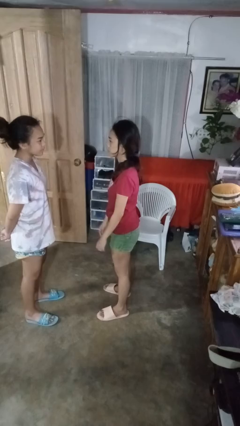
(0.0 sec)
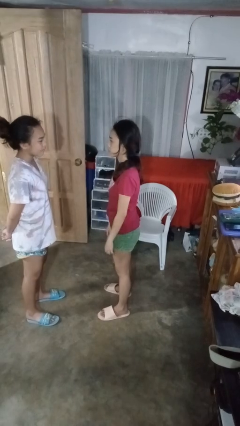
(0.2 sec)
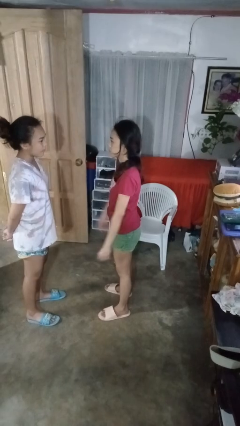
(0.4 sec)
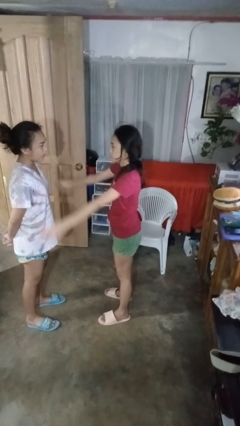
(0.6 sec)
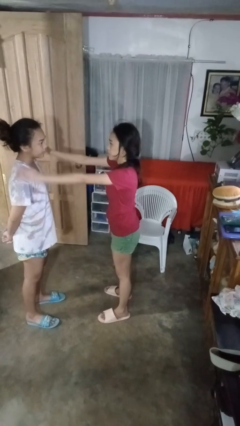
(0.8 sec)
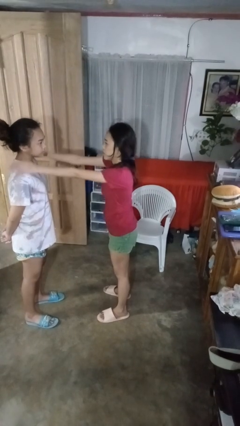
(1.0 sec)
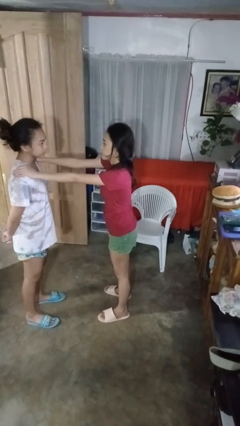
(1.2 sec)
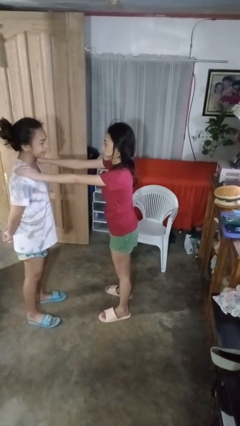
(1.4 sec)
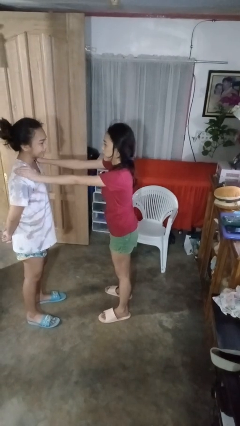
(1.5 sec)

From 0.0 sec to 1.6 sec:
person pounds shoulders of person

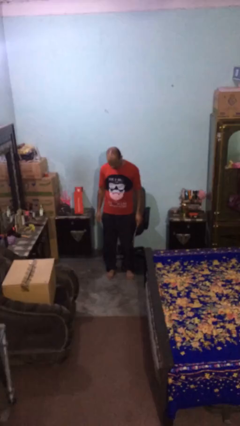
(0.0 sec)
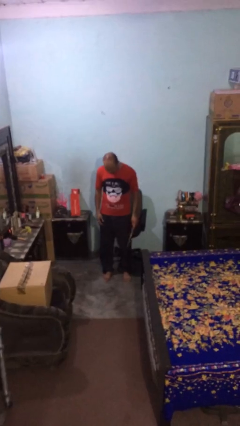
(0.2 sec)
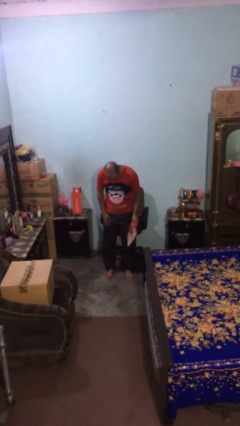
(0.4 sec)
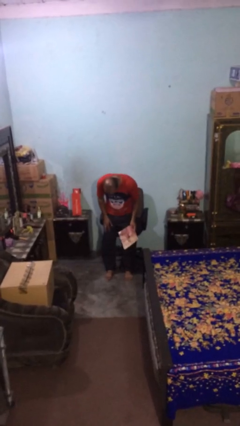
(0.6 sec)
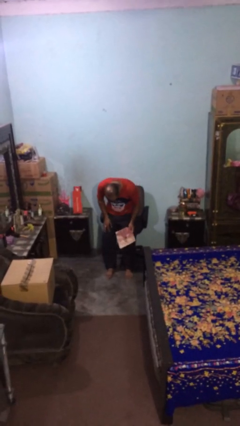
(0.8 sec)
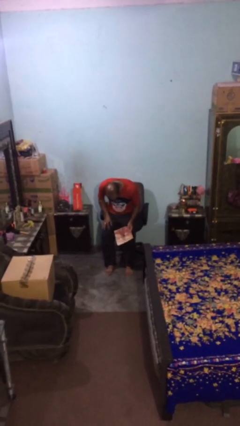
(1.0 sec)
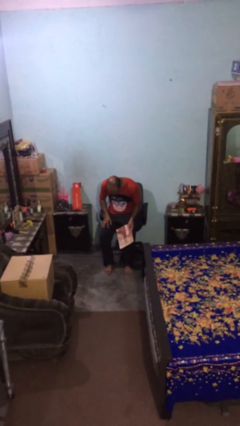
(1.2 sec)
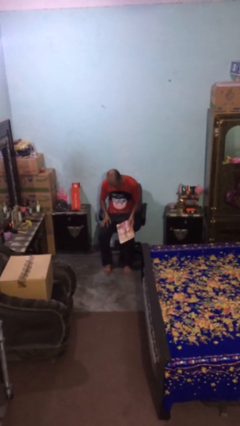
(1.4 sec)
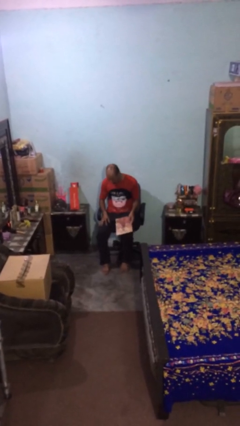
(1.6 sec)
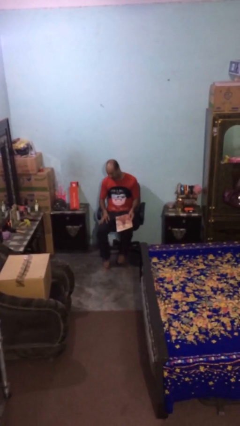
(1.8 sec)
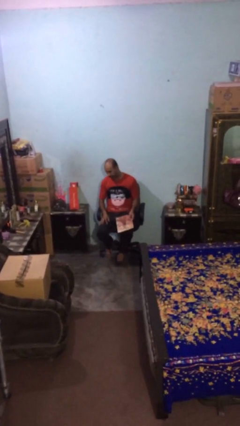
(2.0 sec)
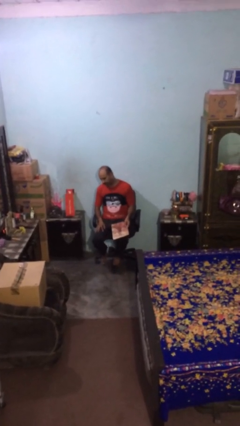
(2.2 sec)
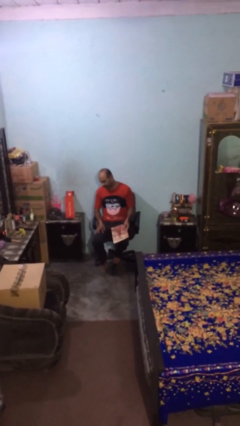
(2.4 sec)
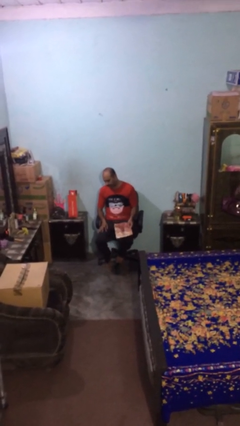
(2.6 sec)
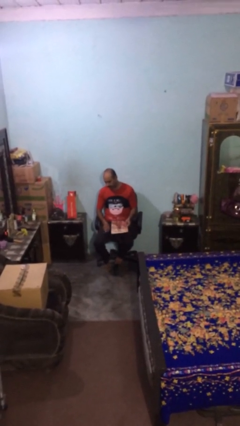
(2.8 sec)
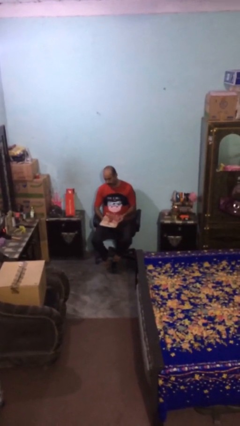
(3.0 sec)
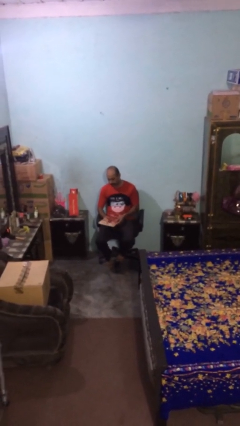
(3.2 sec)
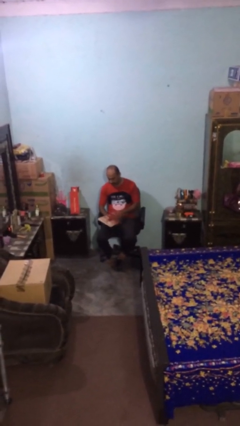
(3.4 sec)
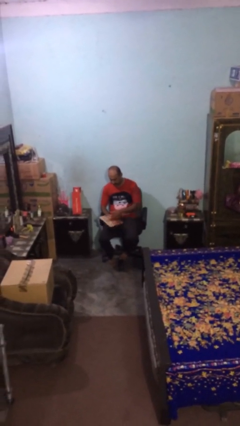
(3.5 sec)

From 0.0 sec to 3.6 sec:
person sits down

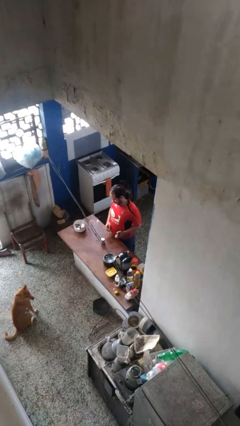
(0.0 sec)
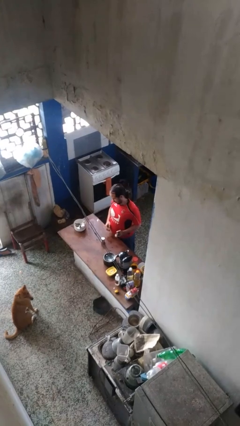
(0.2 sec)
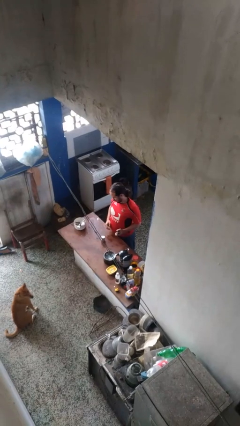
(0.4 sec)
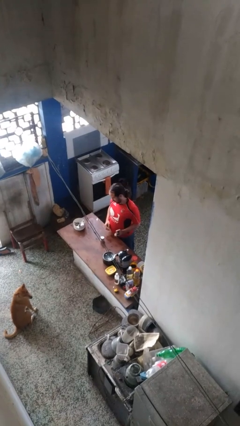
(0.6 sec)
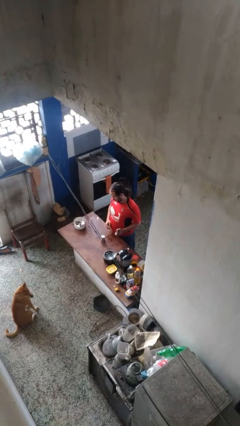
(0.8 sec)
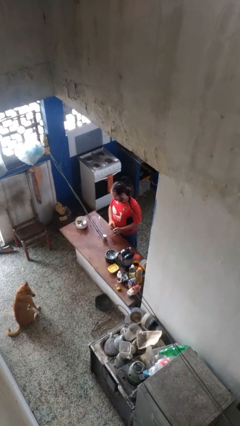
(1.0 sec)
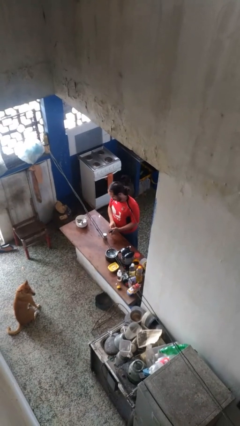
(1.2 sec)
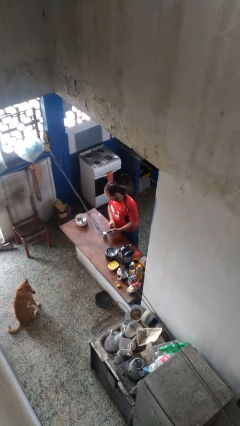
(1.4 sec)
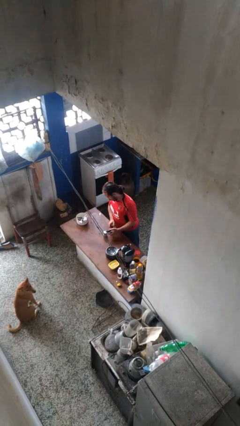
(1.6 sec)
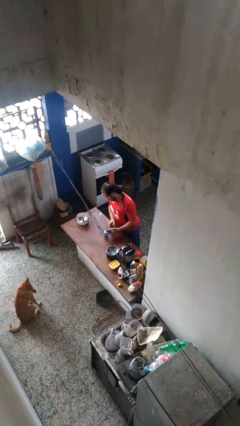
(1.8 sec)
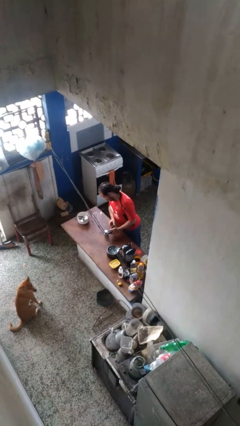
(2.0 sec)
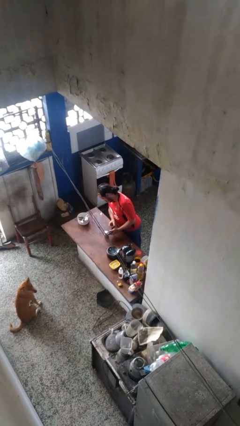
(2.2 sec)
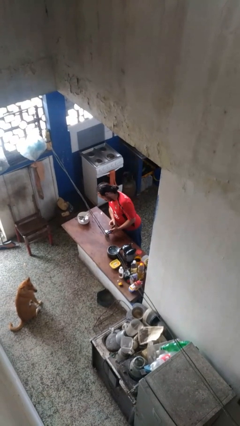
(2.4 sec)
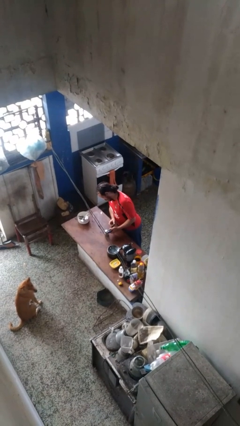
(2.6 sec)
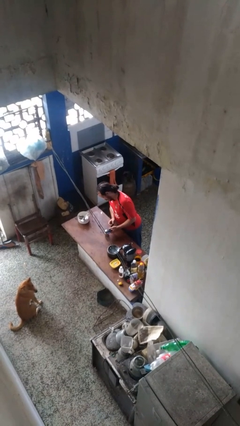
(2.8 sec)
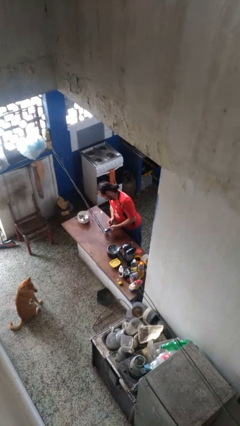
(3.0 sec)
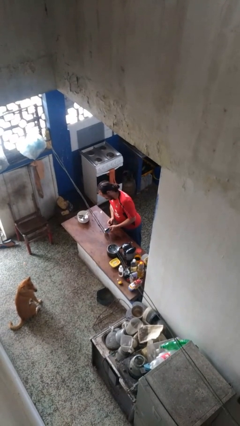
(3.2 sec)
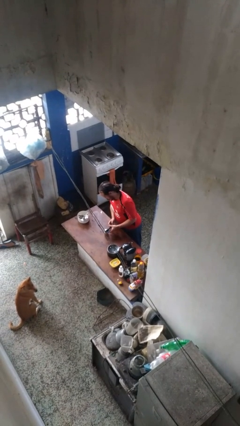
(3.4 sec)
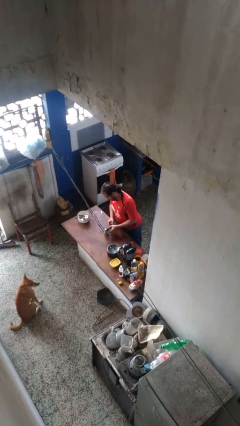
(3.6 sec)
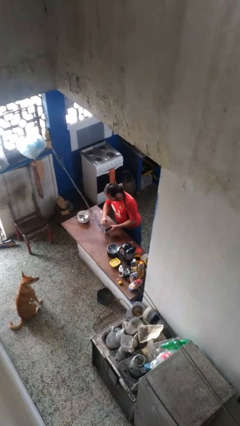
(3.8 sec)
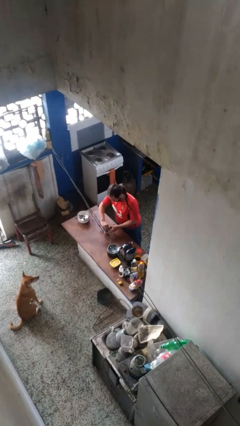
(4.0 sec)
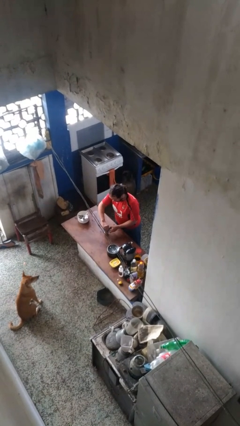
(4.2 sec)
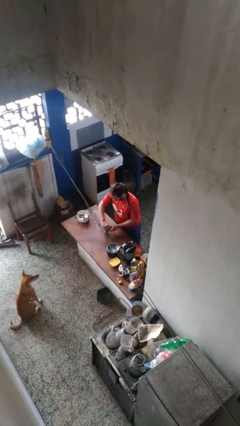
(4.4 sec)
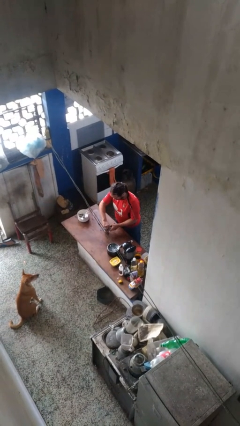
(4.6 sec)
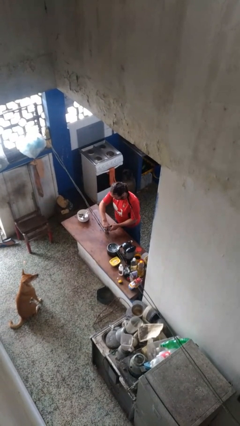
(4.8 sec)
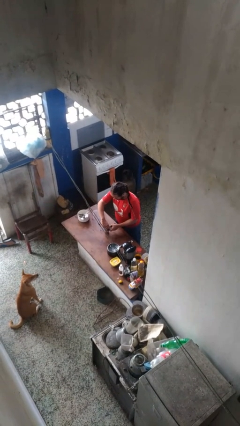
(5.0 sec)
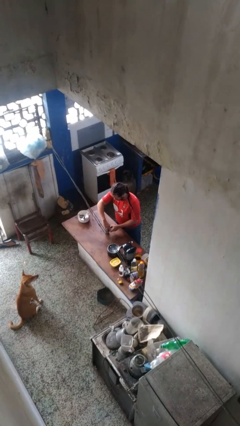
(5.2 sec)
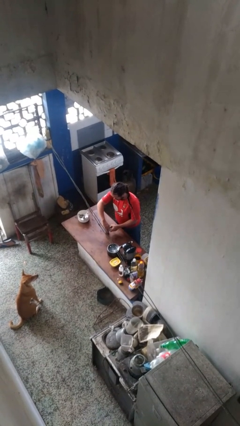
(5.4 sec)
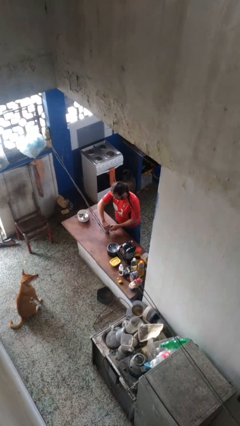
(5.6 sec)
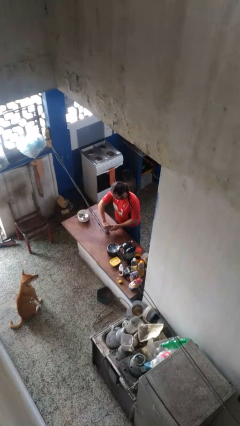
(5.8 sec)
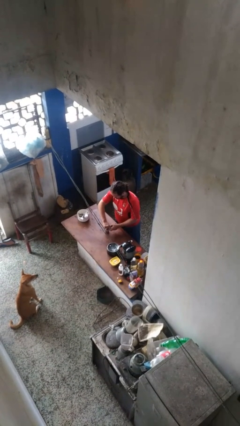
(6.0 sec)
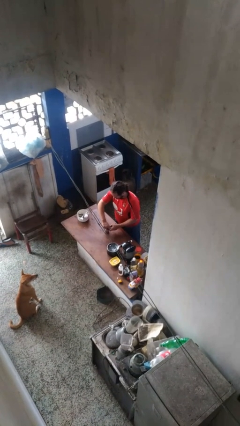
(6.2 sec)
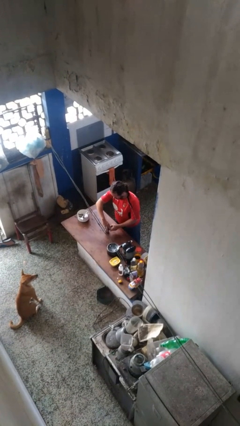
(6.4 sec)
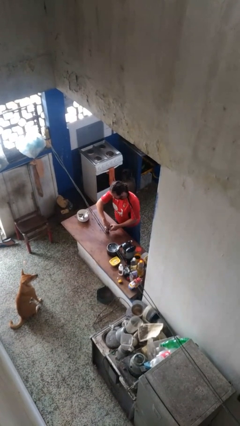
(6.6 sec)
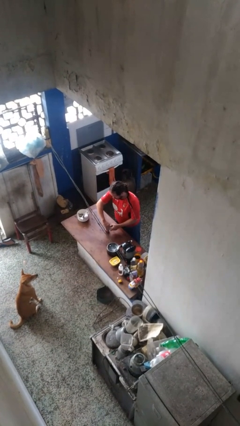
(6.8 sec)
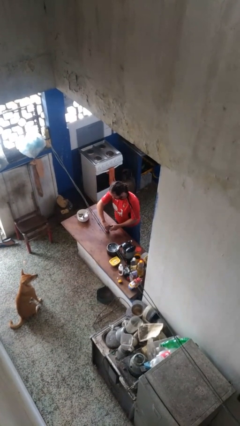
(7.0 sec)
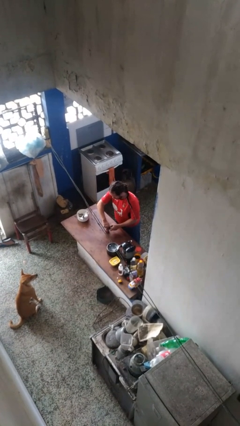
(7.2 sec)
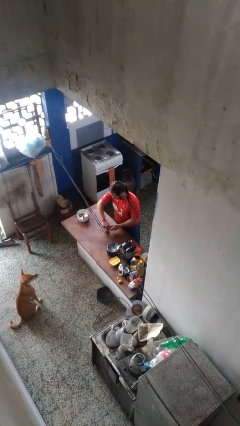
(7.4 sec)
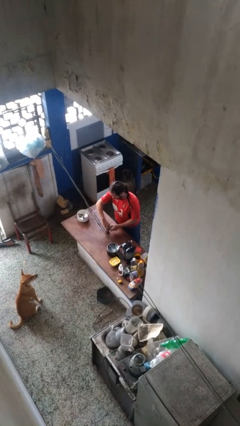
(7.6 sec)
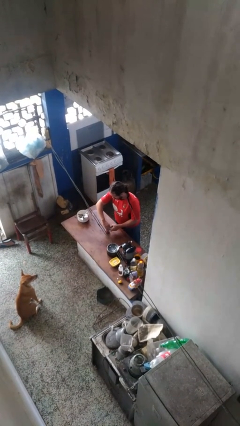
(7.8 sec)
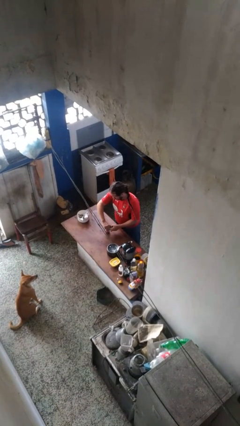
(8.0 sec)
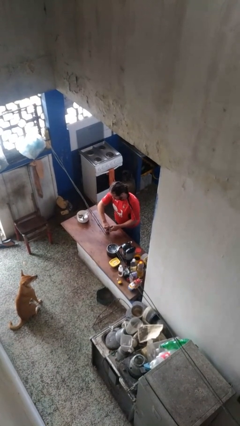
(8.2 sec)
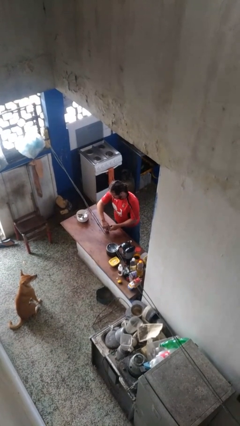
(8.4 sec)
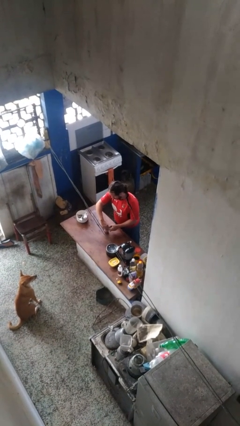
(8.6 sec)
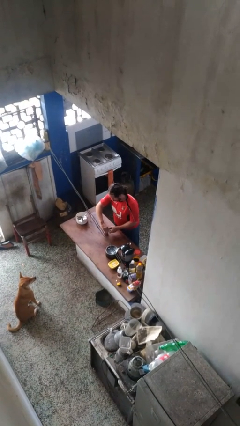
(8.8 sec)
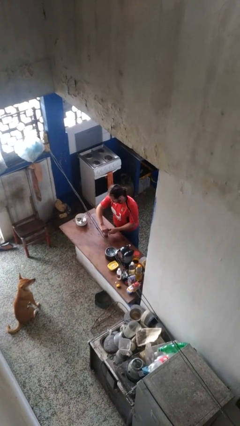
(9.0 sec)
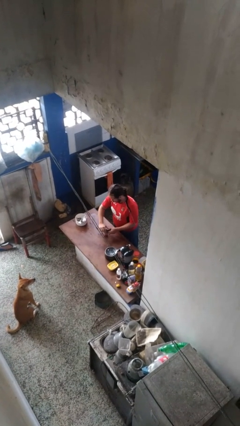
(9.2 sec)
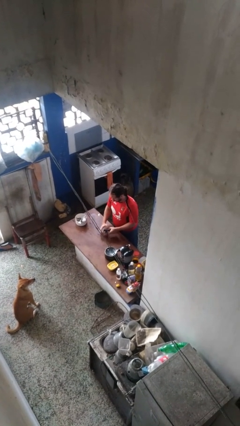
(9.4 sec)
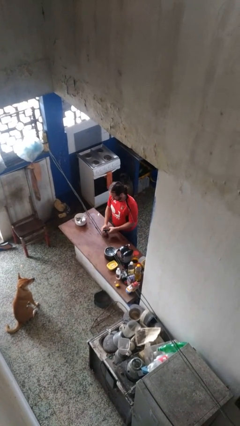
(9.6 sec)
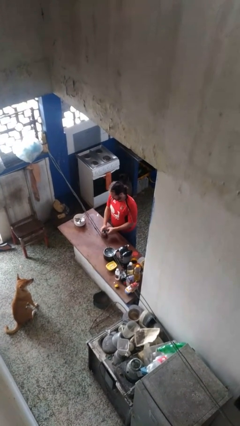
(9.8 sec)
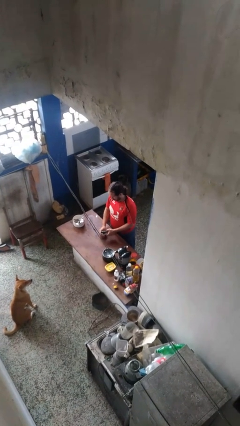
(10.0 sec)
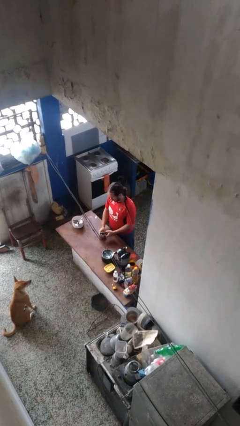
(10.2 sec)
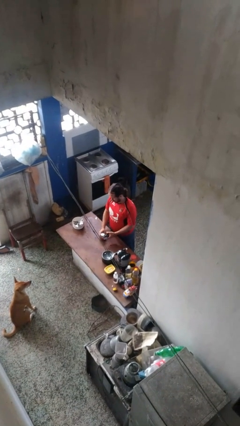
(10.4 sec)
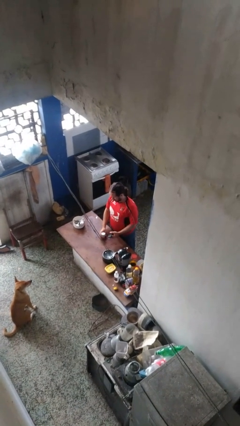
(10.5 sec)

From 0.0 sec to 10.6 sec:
person opens can with can opener

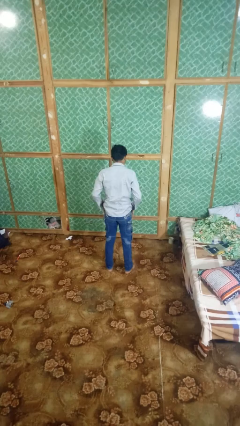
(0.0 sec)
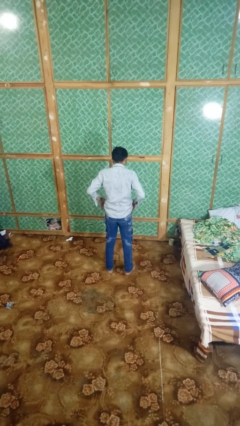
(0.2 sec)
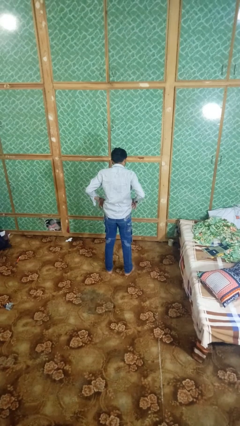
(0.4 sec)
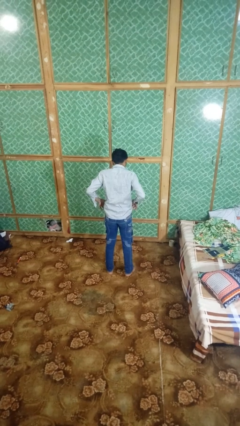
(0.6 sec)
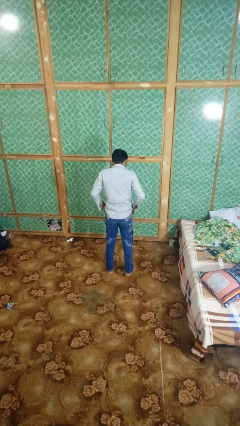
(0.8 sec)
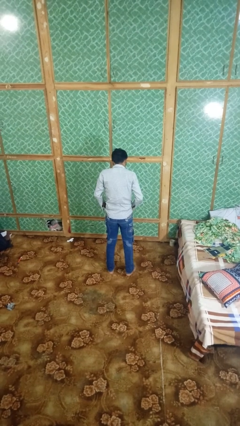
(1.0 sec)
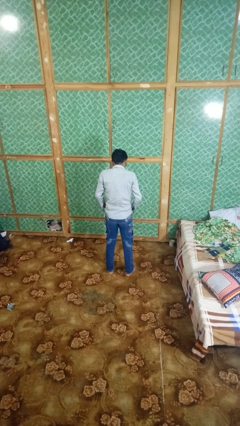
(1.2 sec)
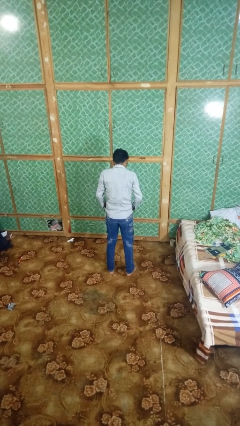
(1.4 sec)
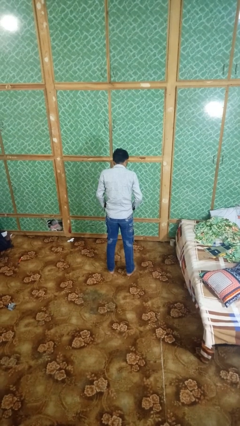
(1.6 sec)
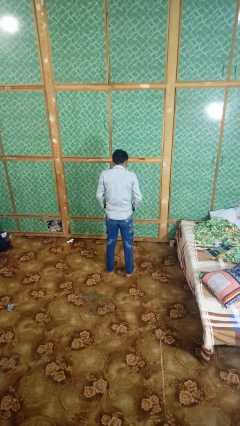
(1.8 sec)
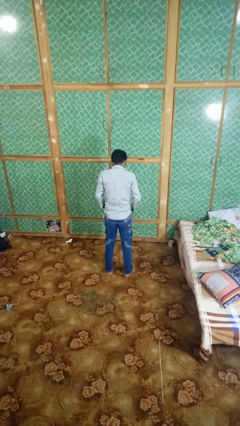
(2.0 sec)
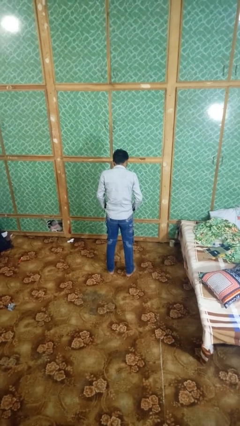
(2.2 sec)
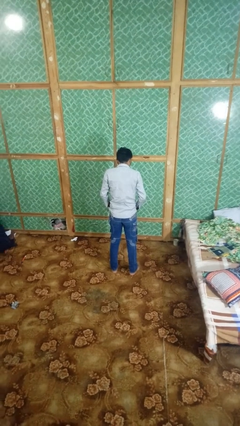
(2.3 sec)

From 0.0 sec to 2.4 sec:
person puts hands in back pockets
